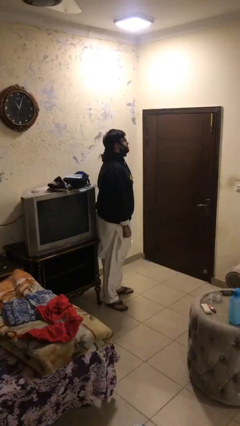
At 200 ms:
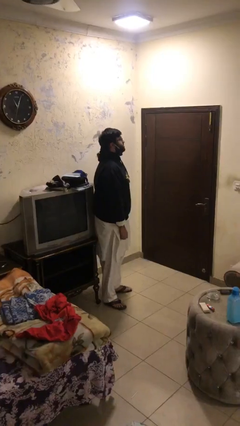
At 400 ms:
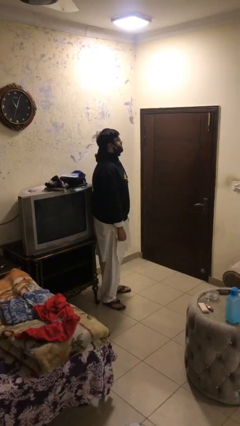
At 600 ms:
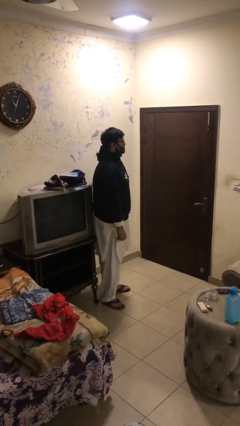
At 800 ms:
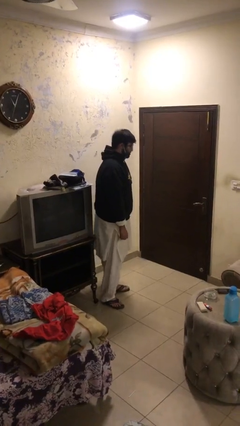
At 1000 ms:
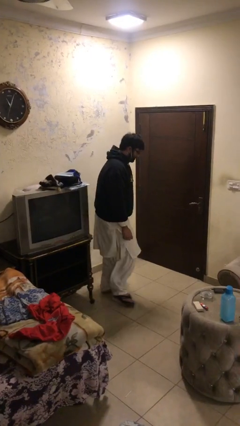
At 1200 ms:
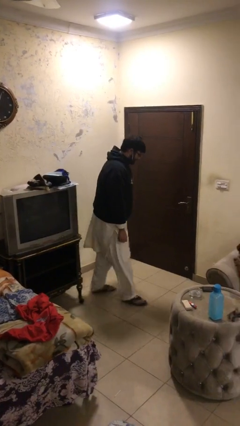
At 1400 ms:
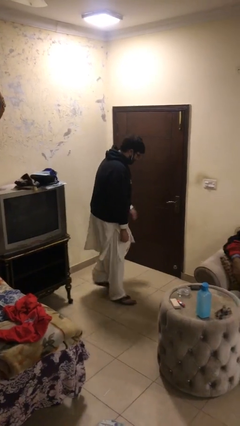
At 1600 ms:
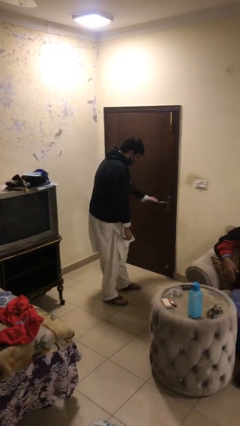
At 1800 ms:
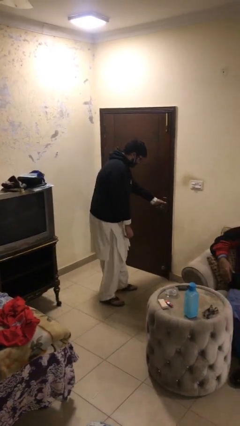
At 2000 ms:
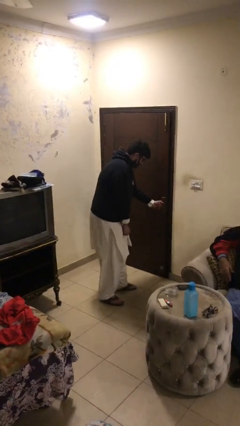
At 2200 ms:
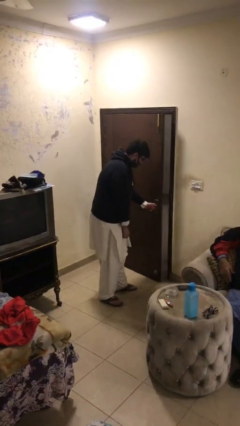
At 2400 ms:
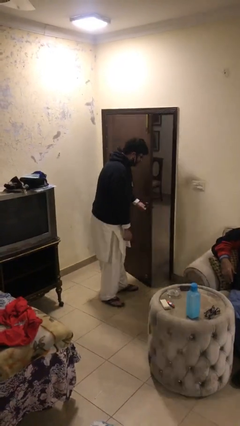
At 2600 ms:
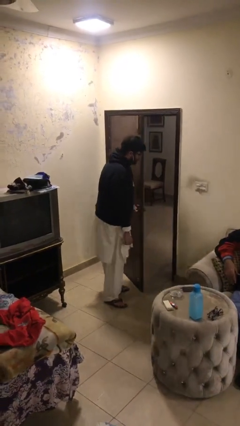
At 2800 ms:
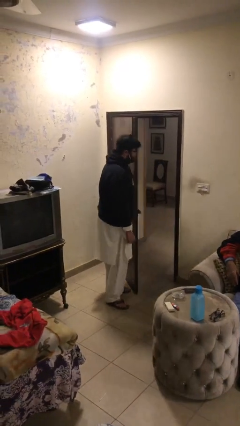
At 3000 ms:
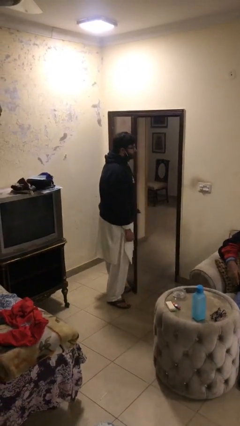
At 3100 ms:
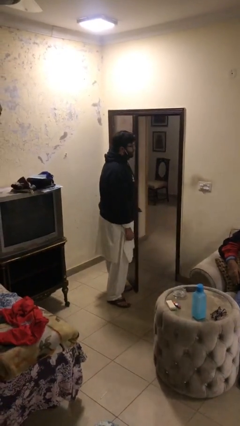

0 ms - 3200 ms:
person opens facility door

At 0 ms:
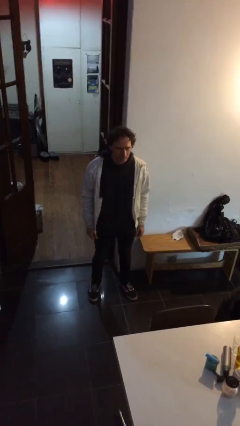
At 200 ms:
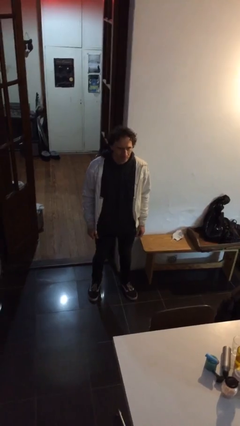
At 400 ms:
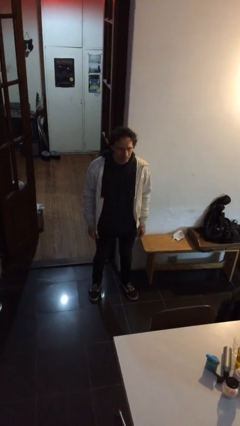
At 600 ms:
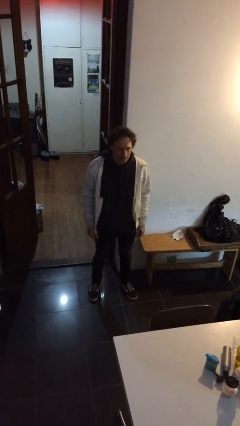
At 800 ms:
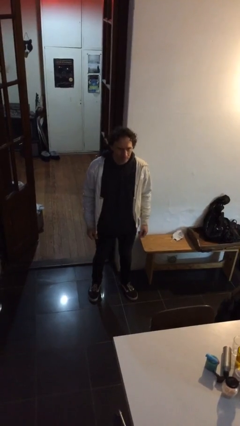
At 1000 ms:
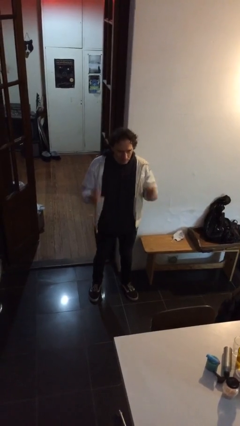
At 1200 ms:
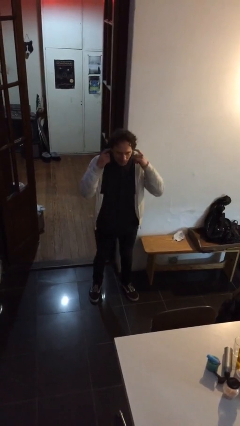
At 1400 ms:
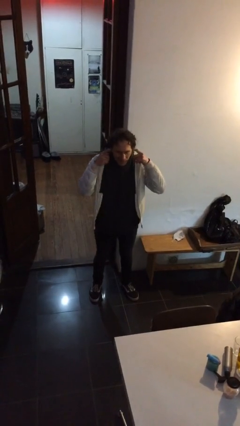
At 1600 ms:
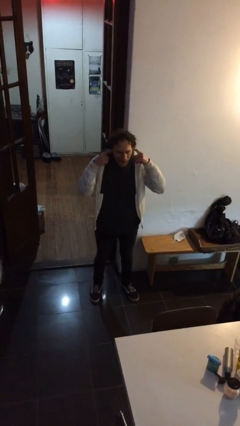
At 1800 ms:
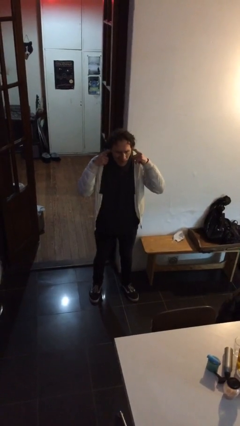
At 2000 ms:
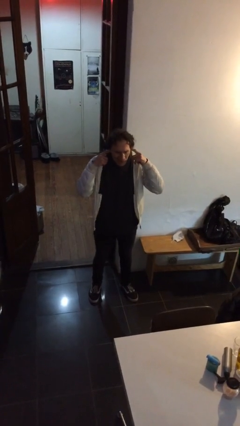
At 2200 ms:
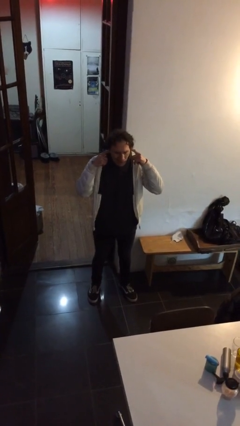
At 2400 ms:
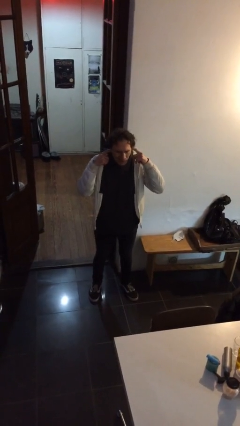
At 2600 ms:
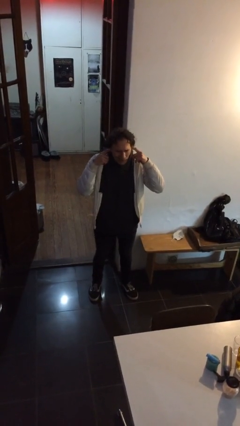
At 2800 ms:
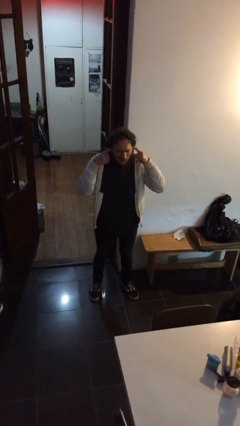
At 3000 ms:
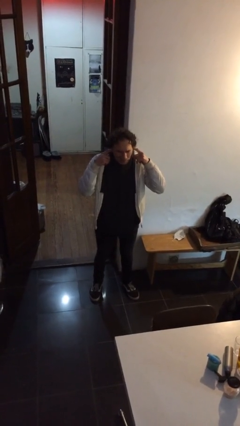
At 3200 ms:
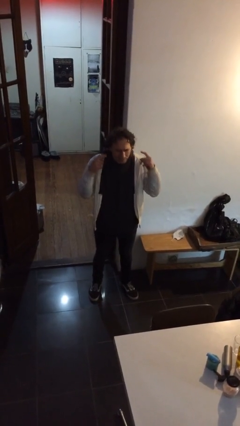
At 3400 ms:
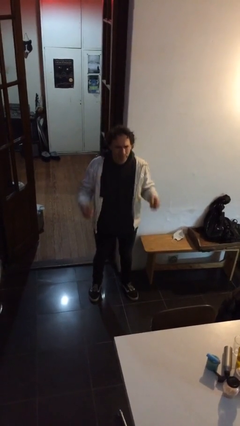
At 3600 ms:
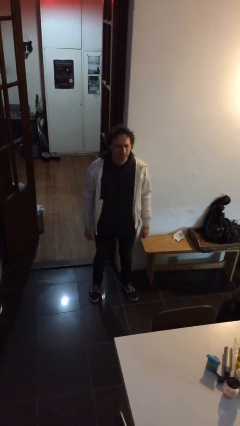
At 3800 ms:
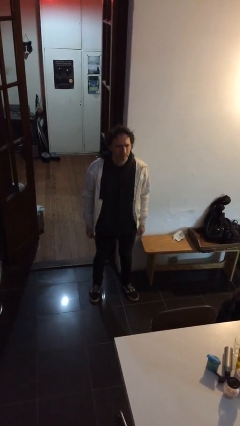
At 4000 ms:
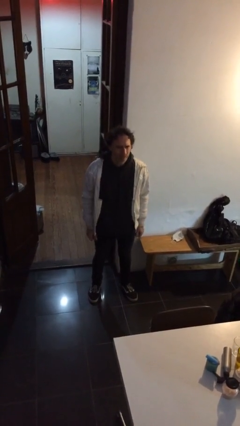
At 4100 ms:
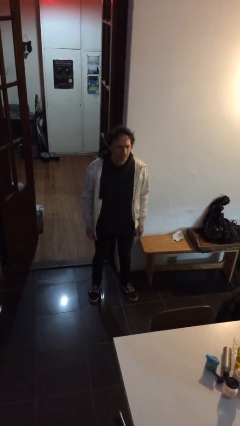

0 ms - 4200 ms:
person puts fingers in ear

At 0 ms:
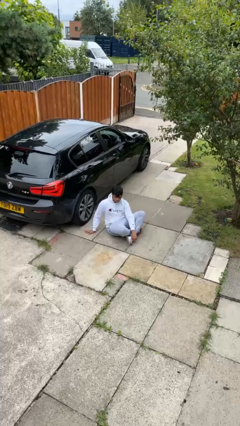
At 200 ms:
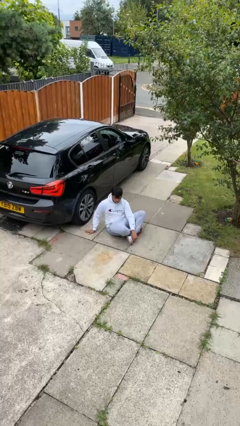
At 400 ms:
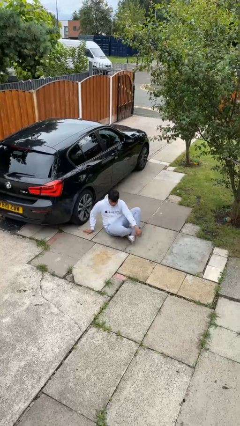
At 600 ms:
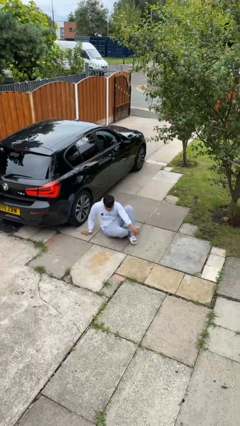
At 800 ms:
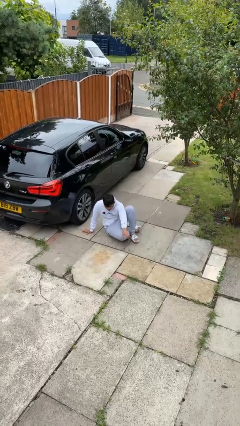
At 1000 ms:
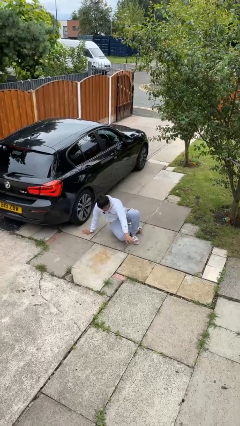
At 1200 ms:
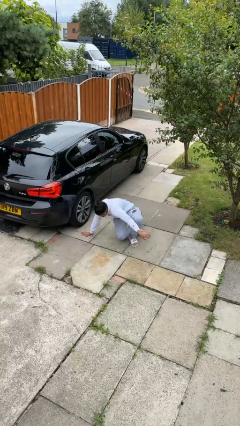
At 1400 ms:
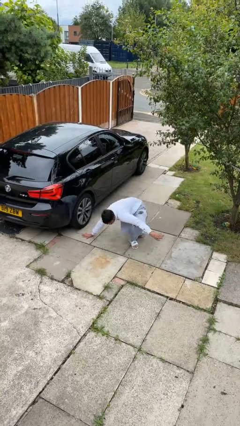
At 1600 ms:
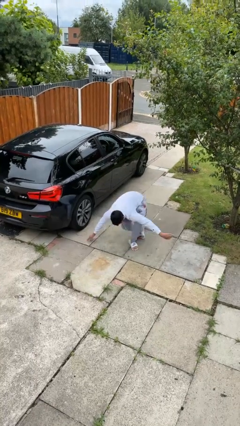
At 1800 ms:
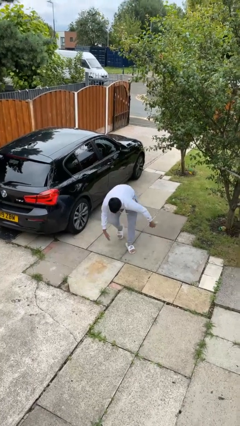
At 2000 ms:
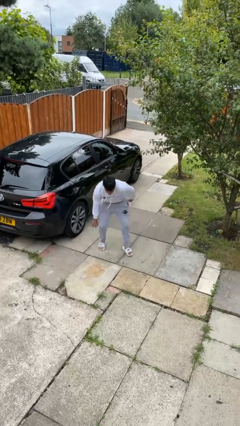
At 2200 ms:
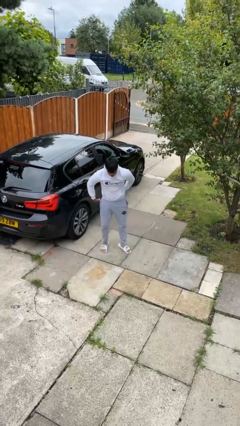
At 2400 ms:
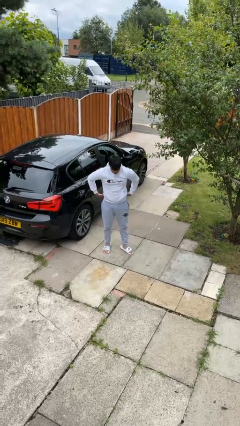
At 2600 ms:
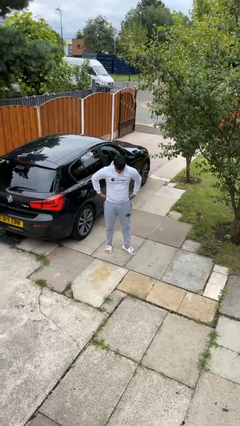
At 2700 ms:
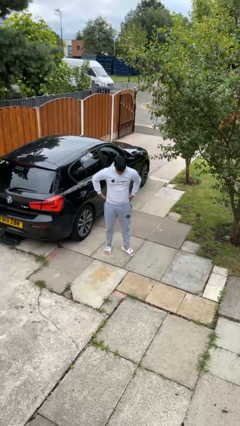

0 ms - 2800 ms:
person stands up from floor

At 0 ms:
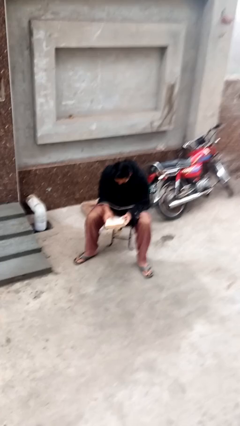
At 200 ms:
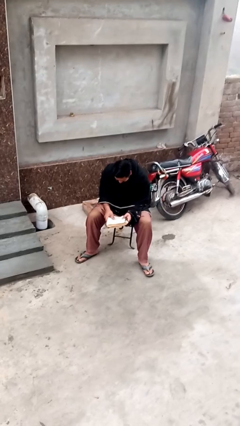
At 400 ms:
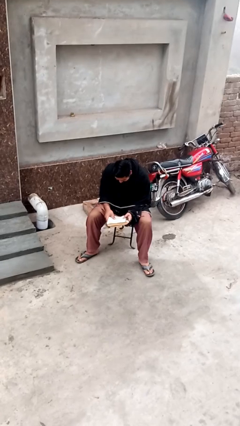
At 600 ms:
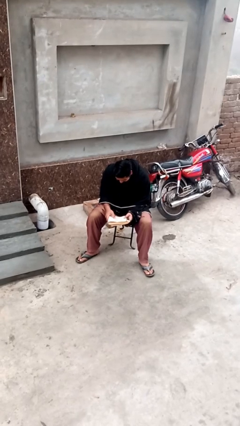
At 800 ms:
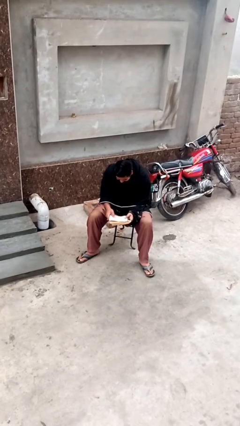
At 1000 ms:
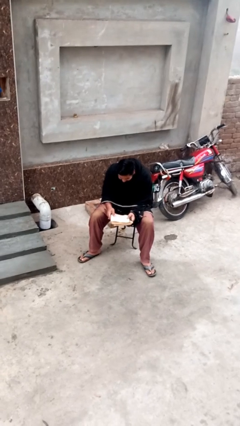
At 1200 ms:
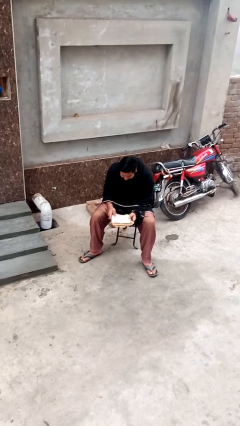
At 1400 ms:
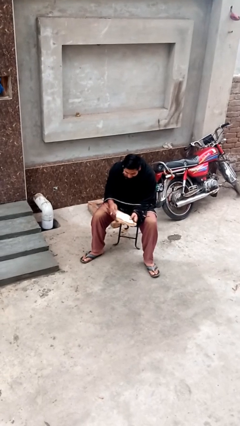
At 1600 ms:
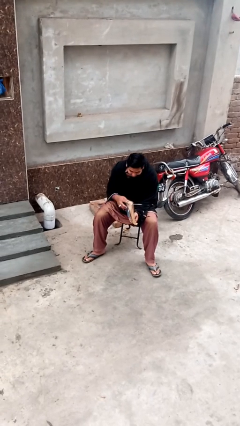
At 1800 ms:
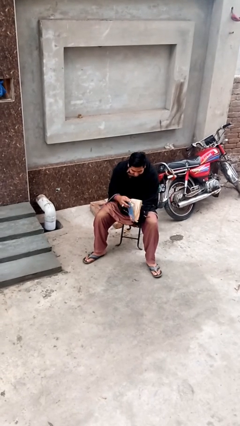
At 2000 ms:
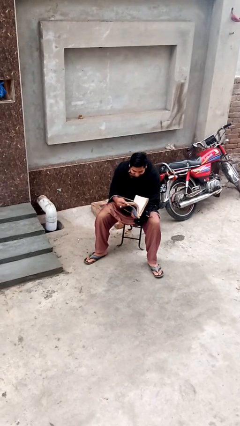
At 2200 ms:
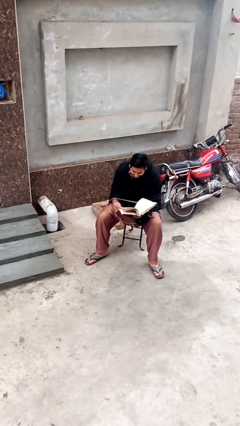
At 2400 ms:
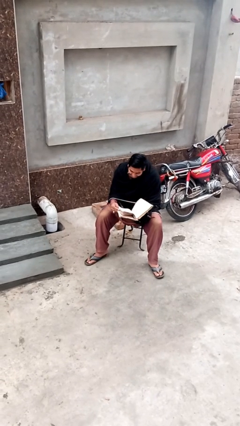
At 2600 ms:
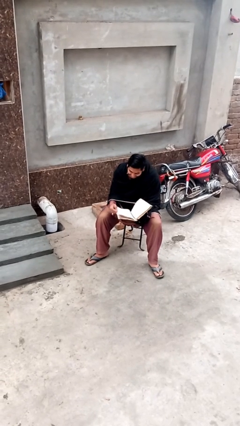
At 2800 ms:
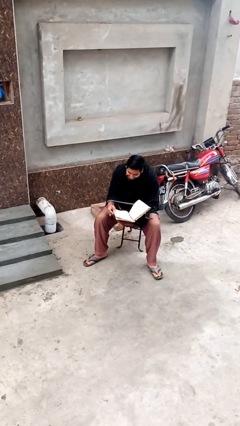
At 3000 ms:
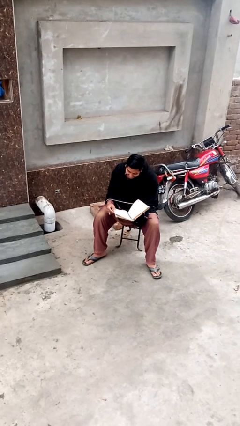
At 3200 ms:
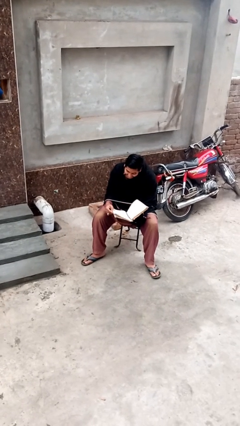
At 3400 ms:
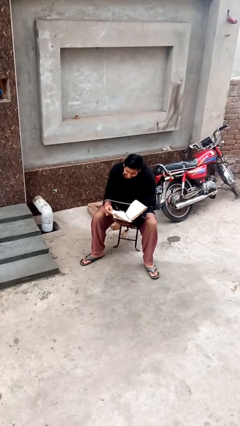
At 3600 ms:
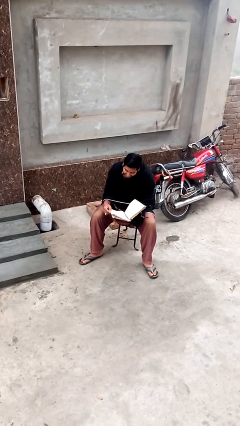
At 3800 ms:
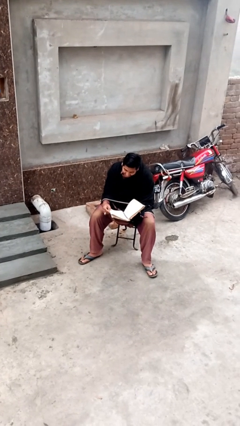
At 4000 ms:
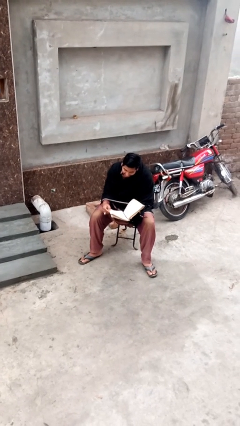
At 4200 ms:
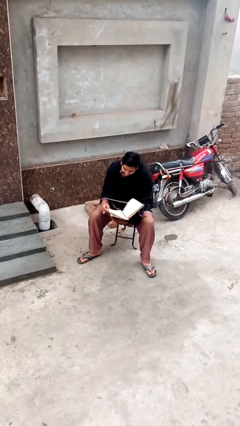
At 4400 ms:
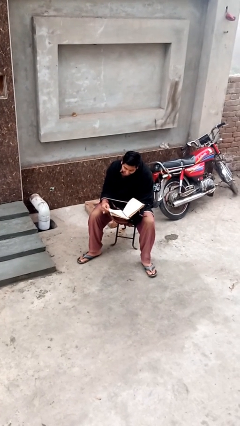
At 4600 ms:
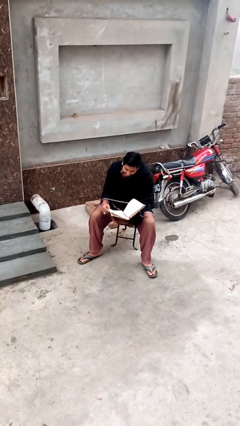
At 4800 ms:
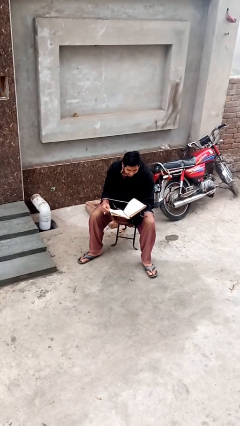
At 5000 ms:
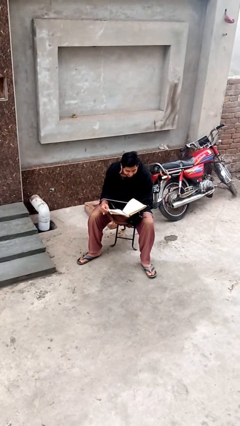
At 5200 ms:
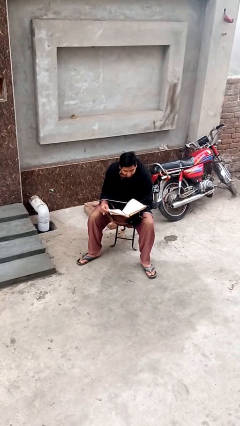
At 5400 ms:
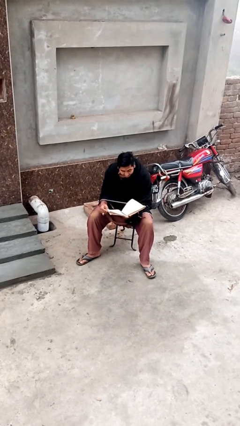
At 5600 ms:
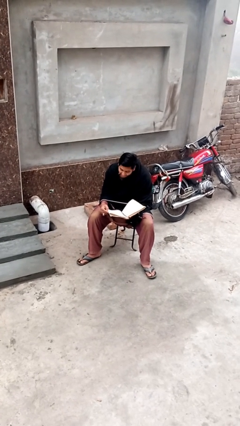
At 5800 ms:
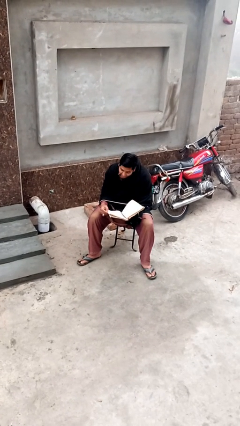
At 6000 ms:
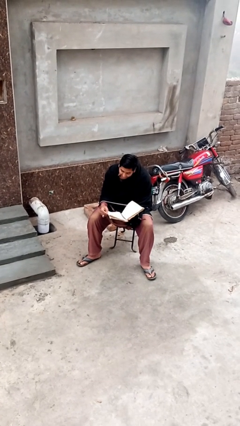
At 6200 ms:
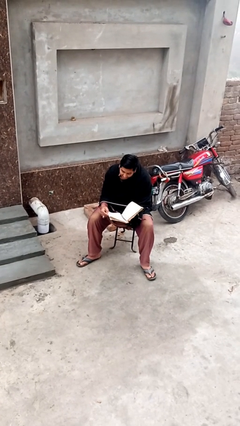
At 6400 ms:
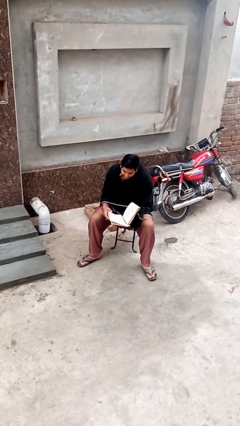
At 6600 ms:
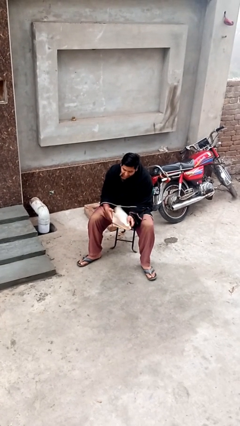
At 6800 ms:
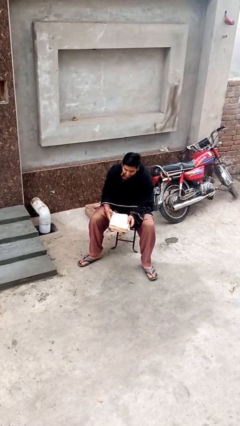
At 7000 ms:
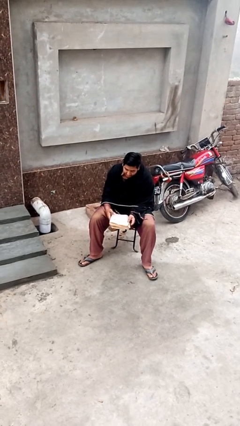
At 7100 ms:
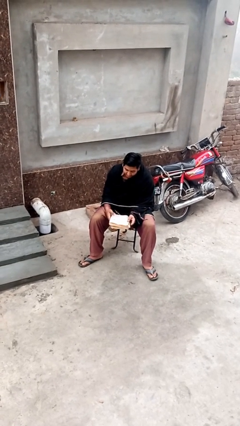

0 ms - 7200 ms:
person reads document

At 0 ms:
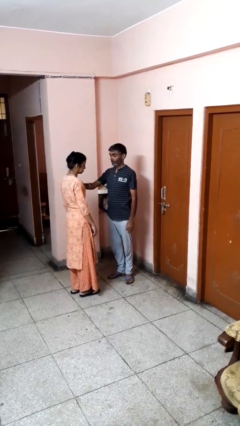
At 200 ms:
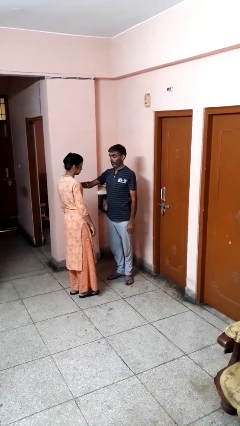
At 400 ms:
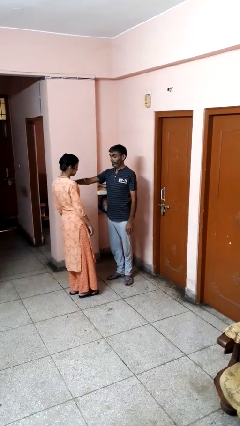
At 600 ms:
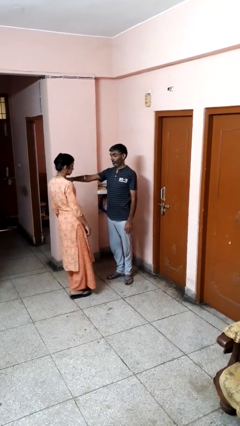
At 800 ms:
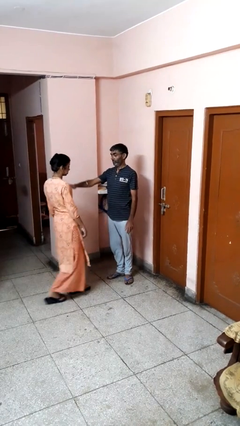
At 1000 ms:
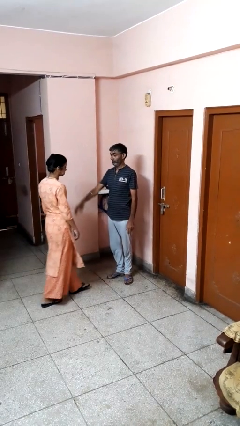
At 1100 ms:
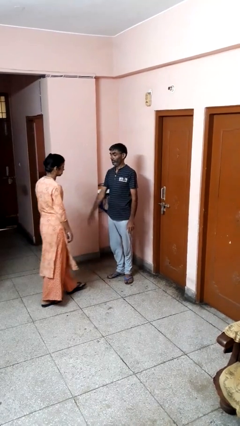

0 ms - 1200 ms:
person shoves person
